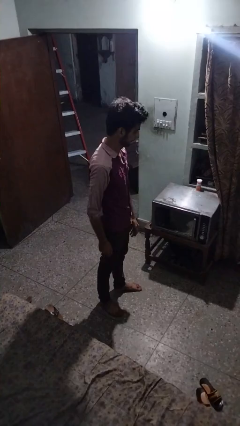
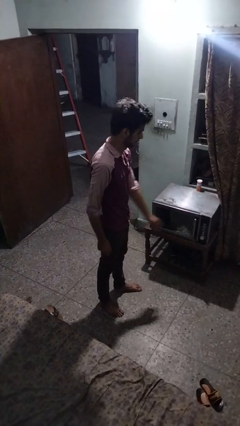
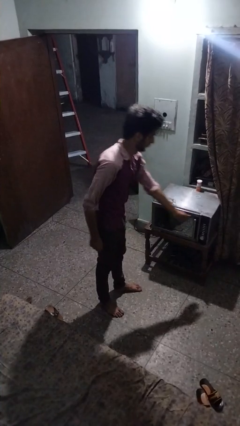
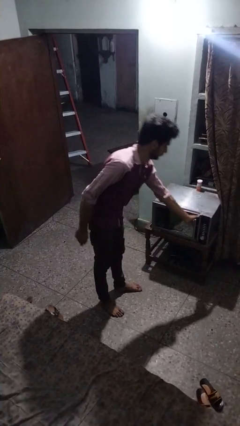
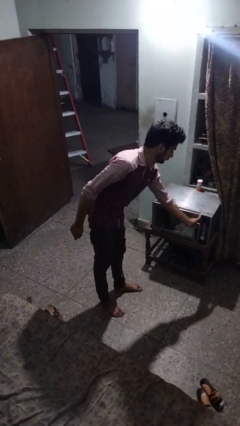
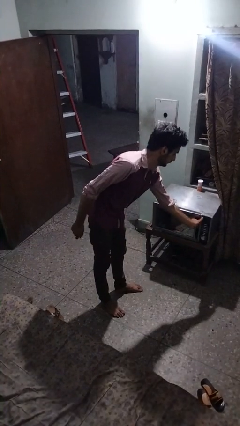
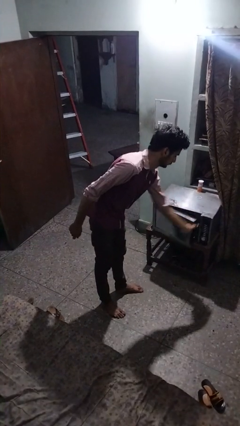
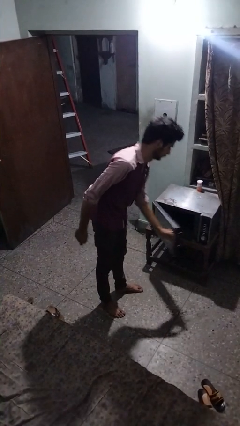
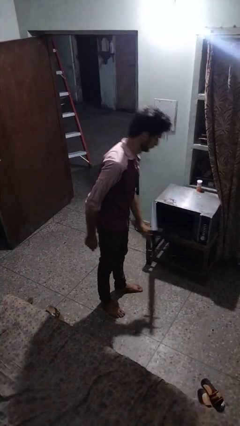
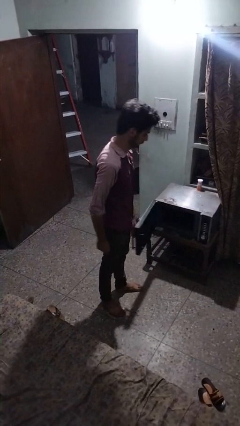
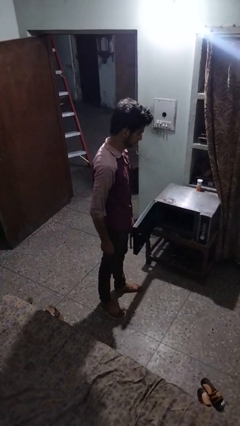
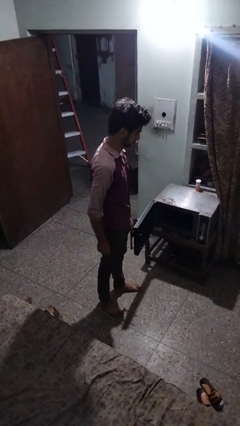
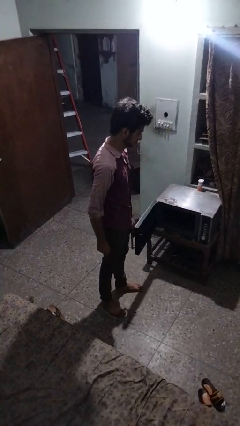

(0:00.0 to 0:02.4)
person opens microwave

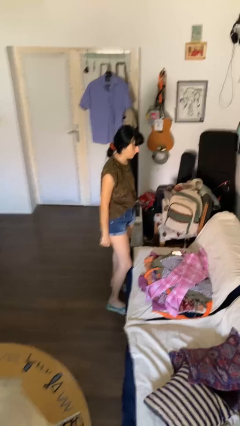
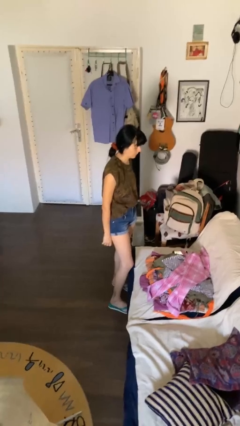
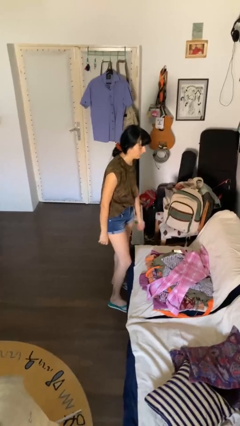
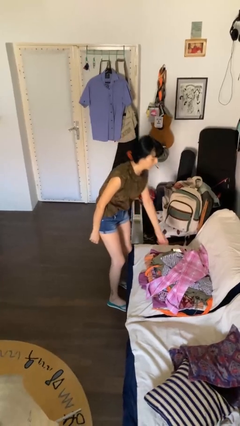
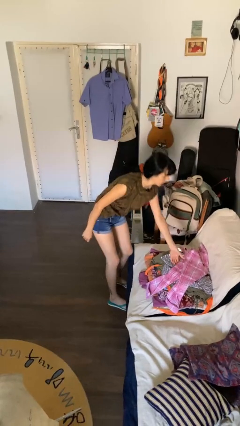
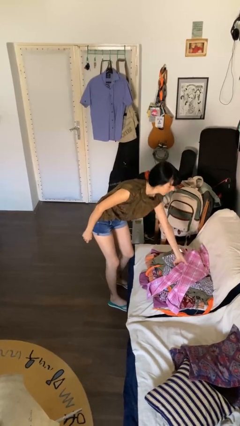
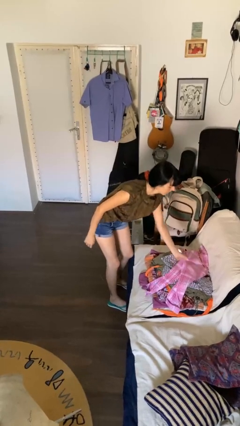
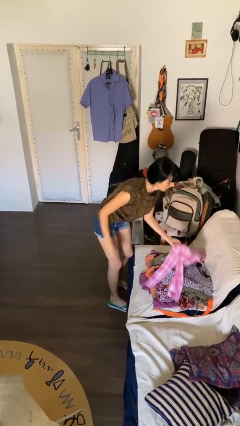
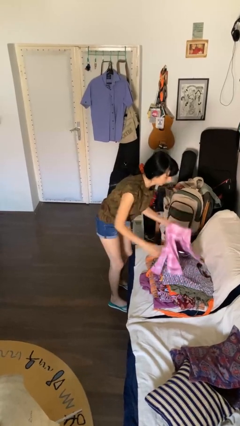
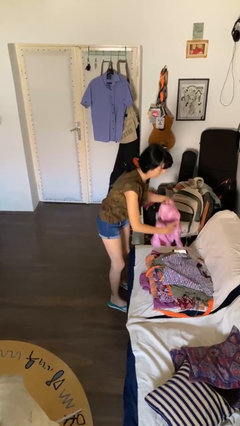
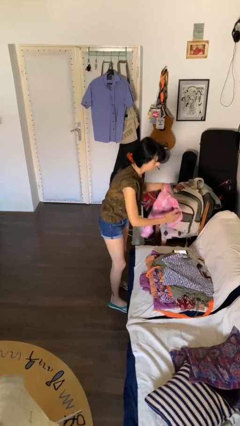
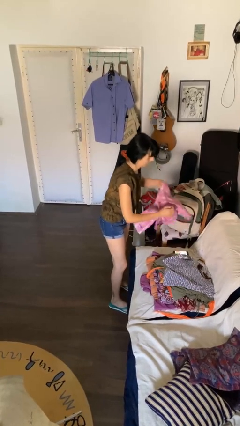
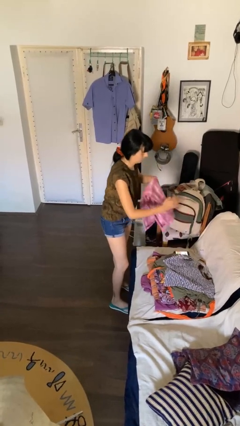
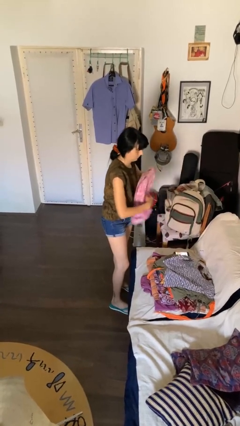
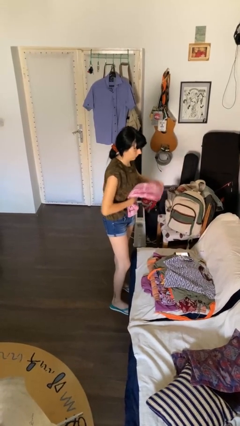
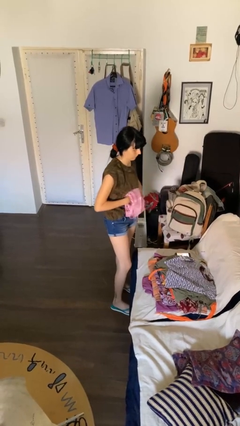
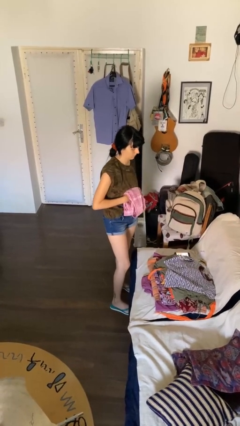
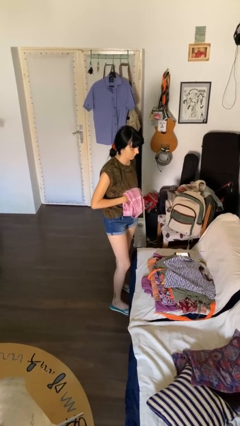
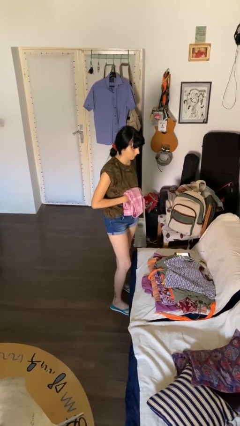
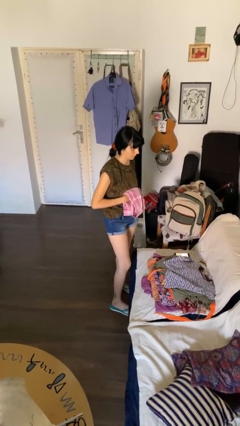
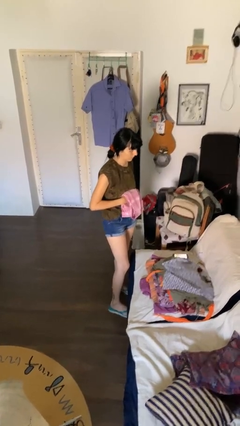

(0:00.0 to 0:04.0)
person folds pants

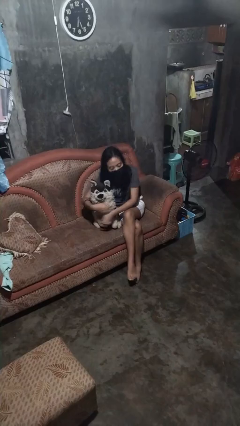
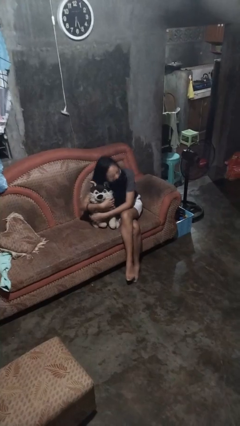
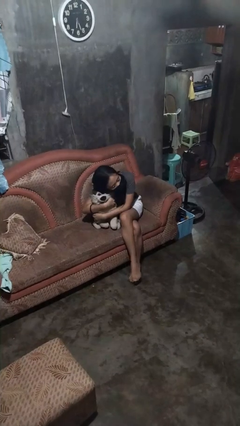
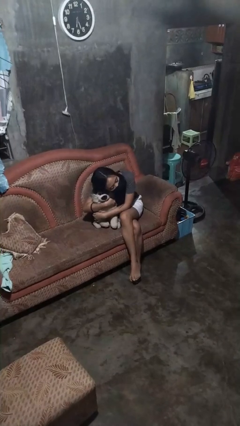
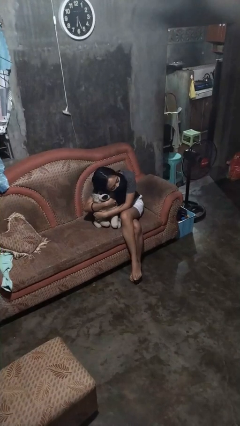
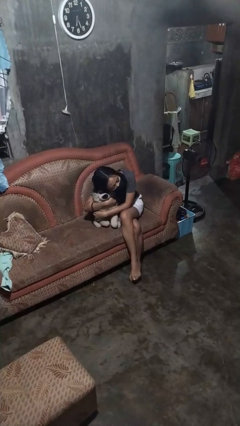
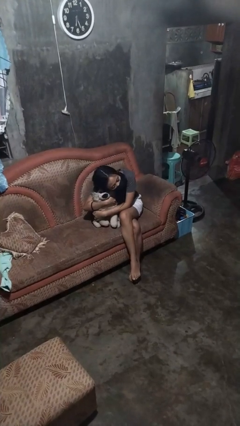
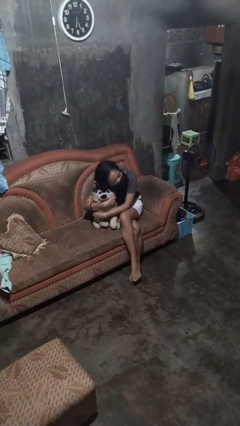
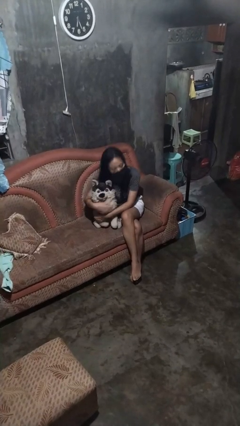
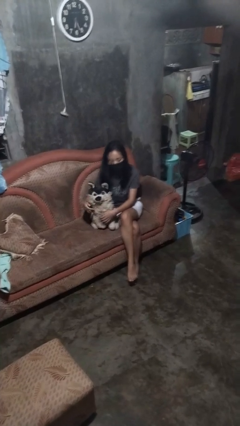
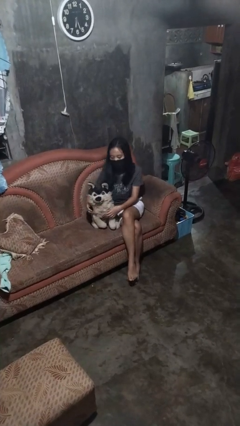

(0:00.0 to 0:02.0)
person hugs stuffed animal

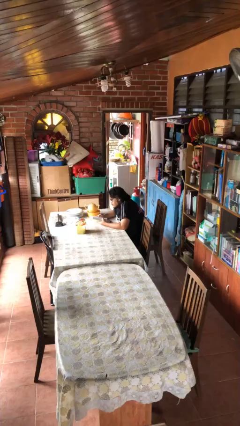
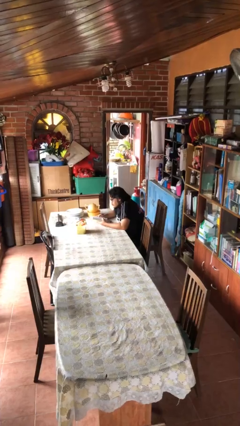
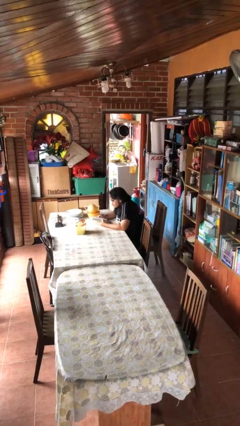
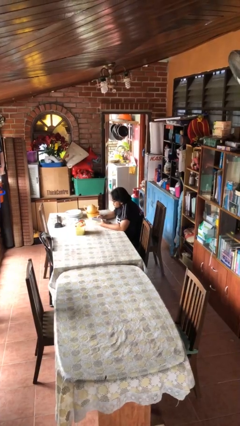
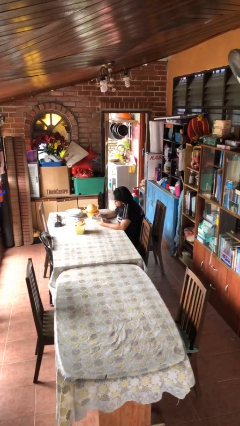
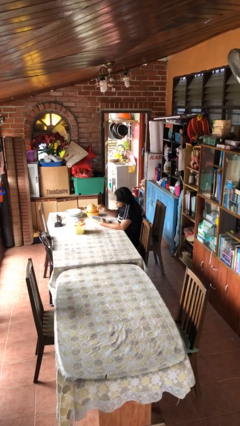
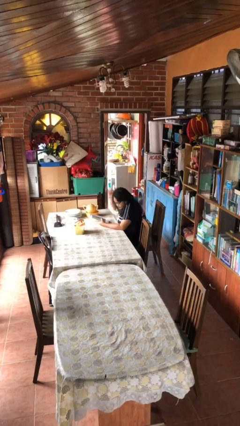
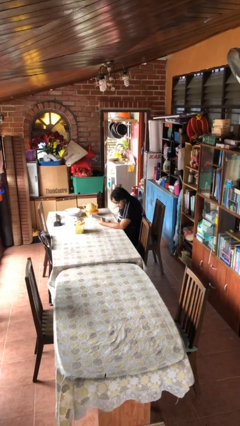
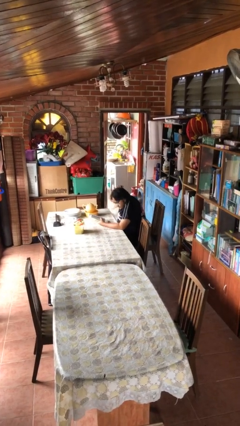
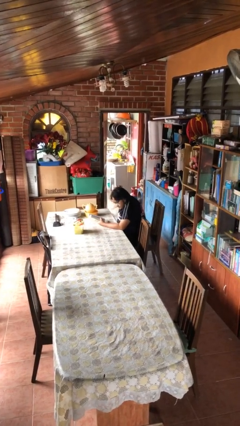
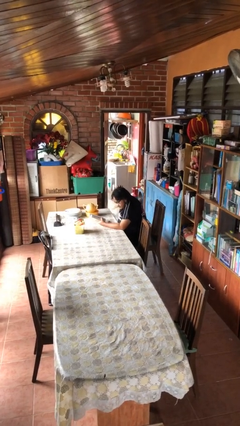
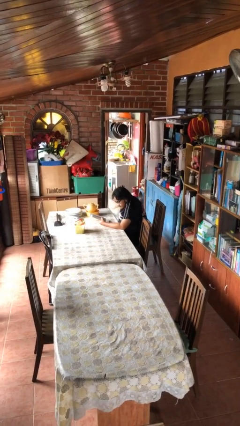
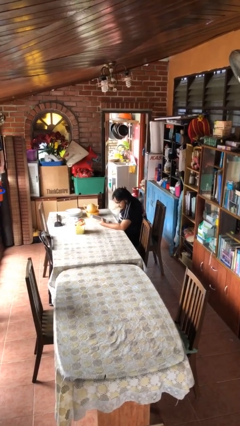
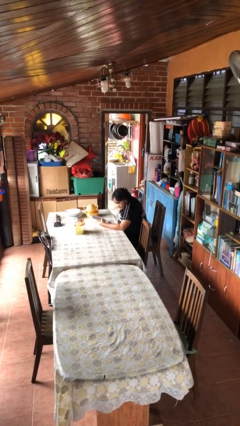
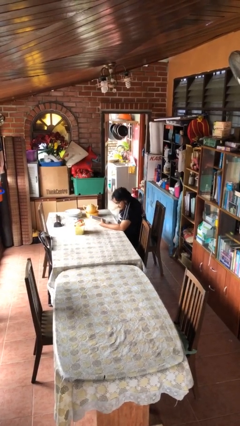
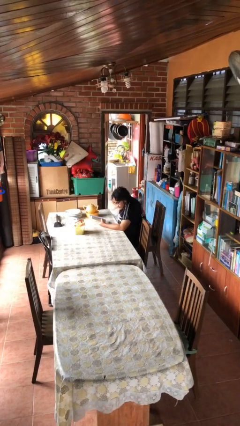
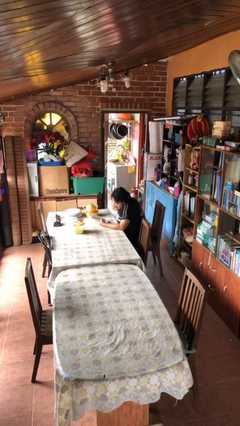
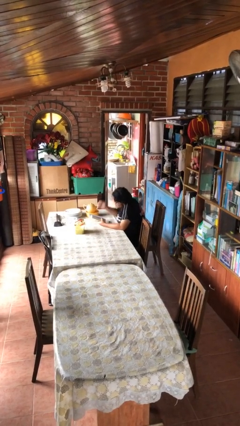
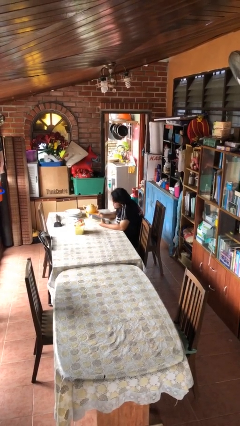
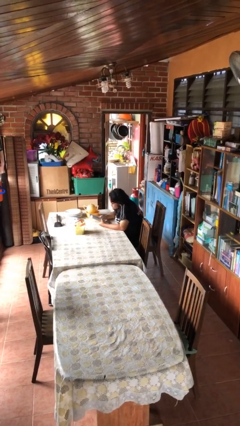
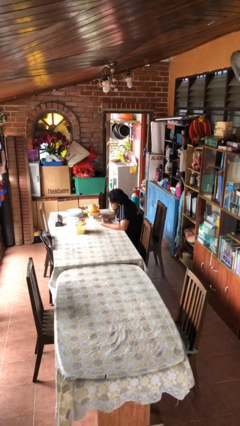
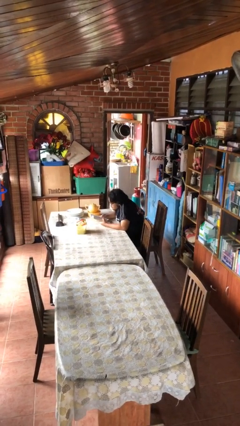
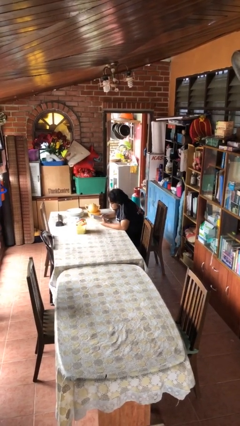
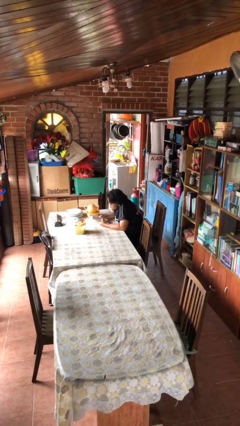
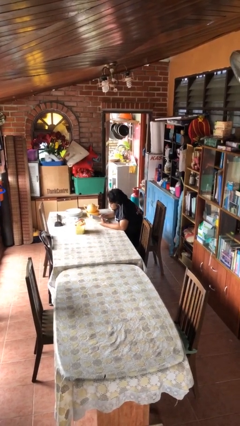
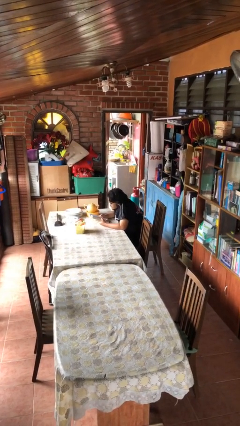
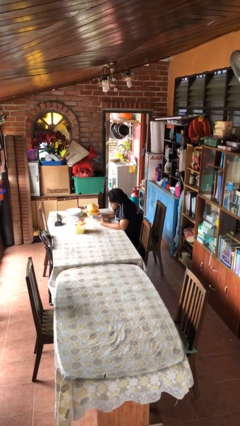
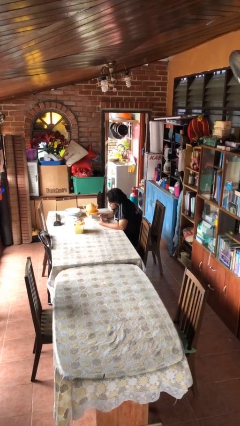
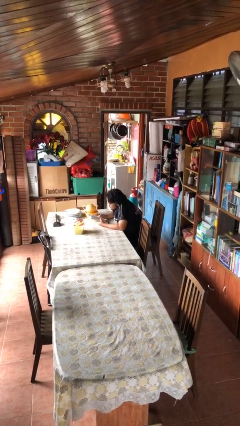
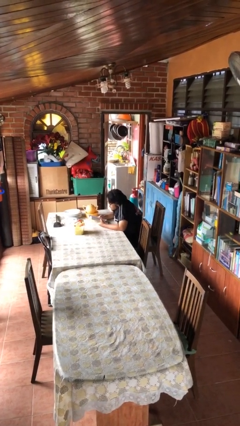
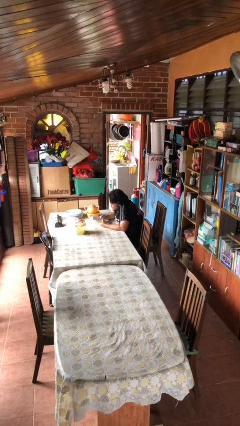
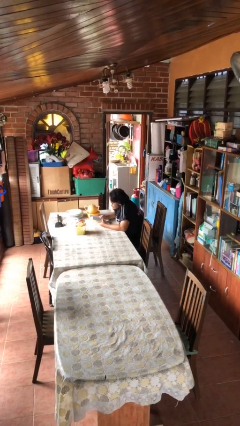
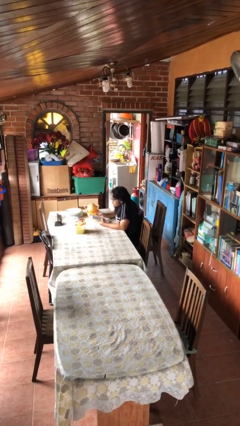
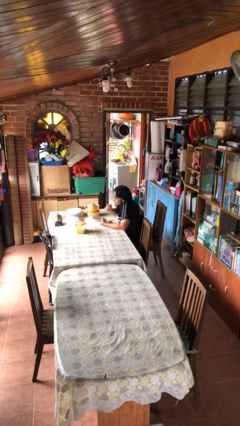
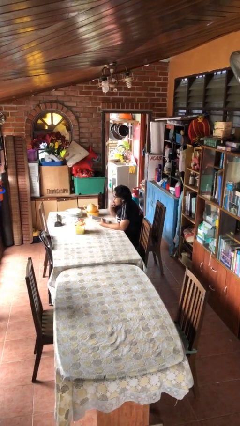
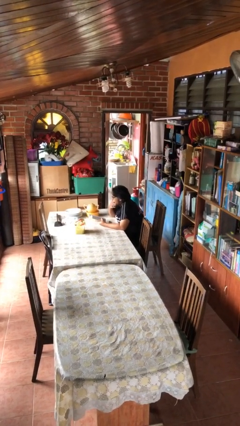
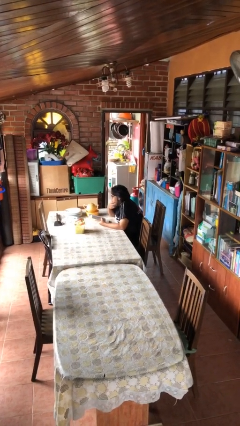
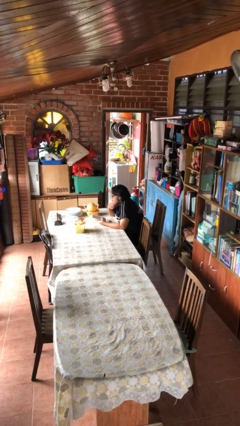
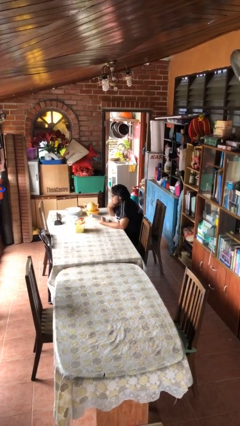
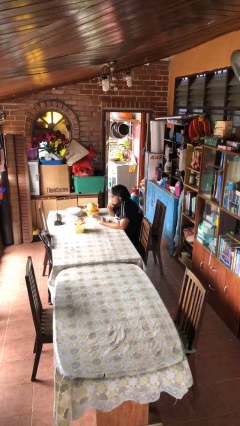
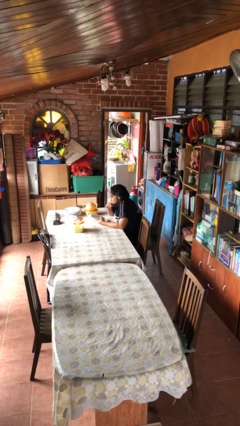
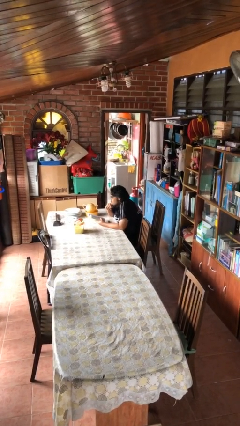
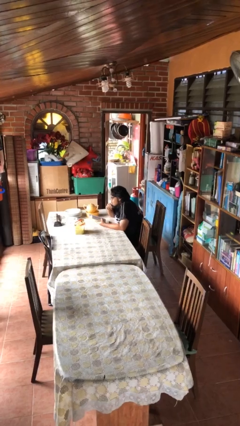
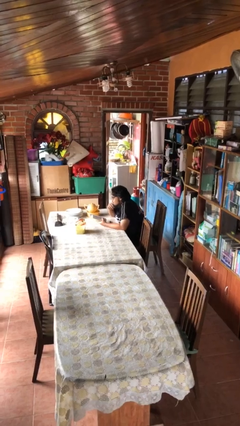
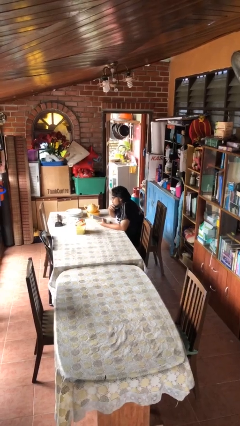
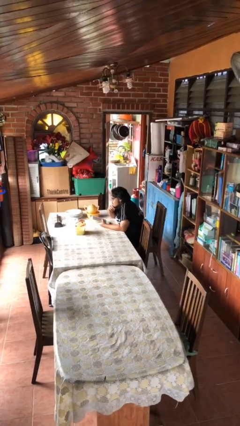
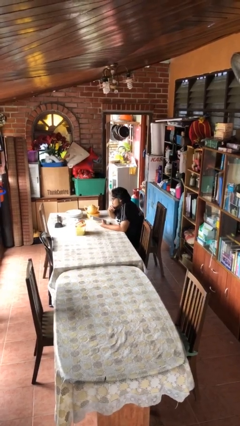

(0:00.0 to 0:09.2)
person reads document

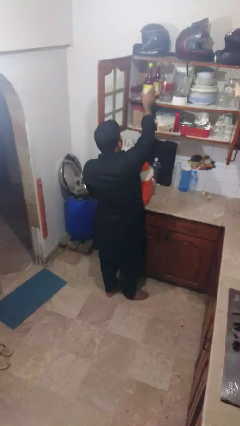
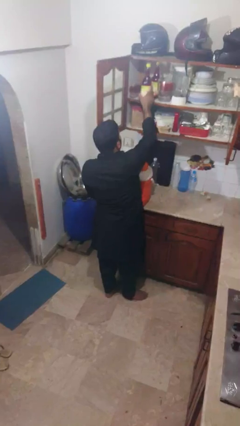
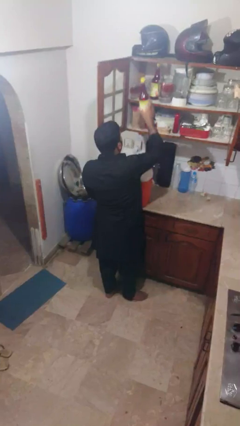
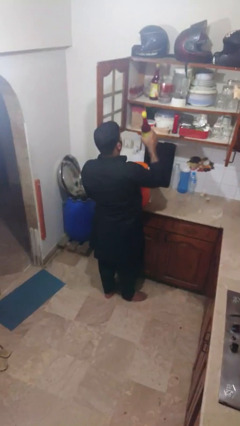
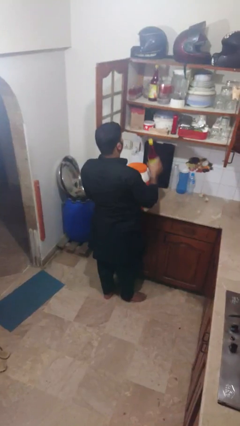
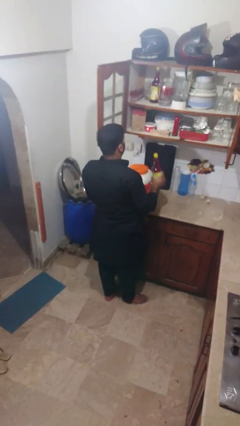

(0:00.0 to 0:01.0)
person picks up object from cabinet
